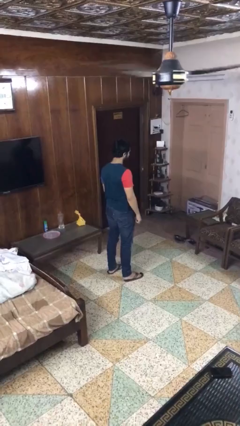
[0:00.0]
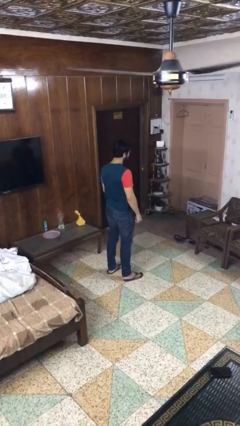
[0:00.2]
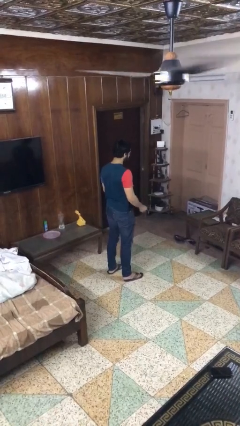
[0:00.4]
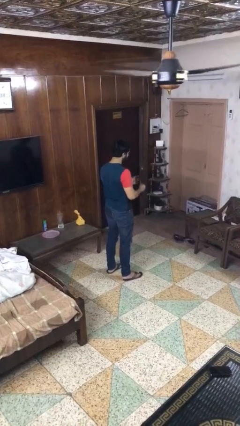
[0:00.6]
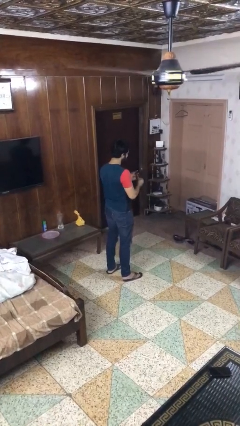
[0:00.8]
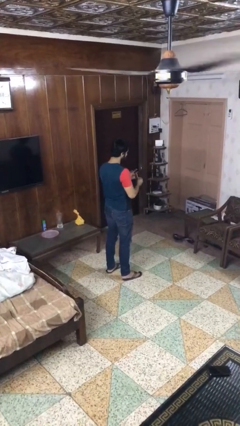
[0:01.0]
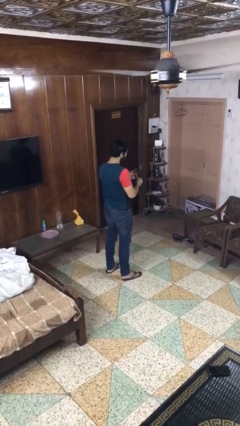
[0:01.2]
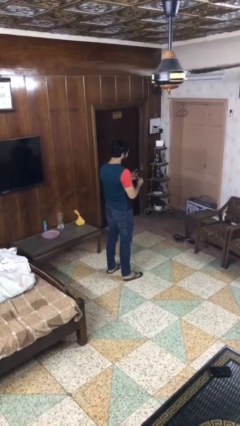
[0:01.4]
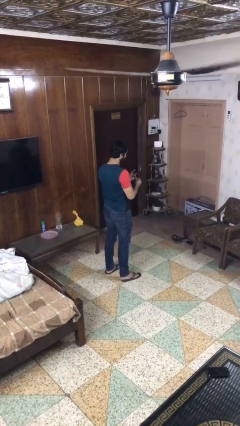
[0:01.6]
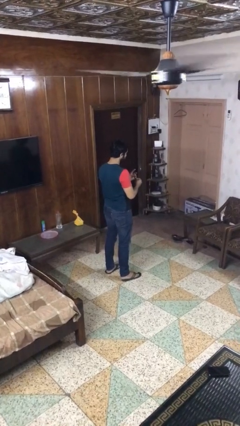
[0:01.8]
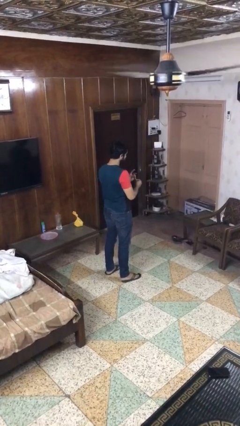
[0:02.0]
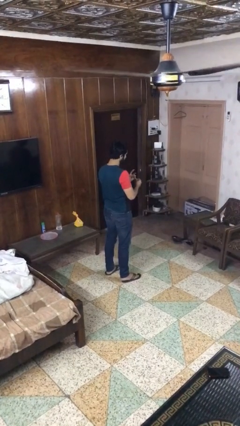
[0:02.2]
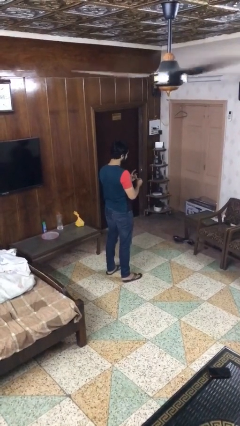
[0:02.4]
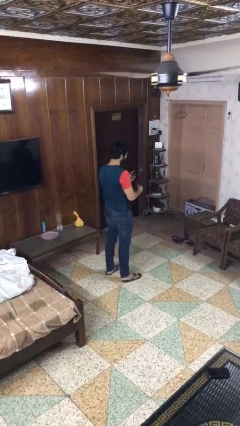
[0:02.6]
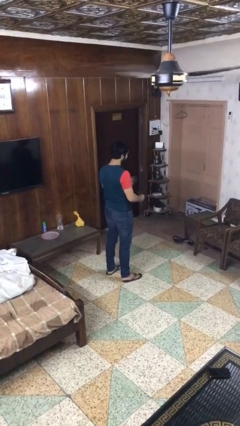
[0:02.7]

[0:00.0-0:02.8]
person files fingernails

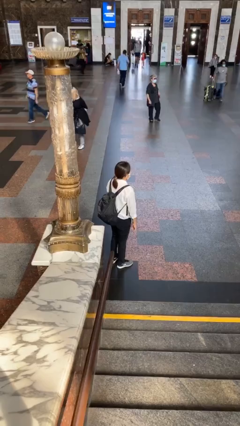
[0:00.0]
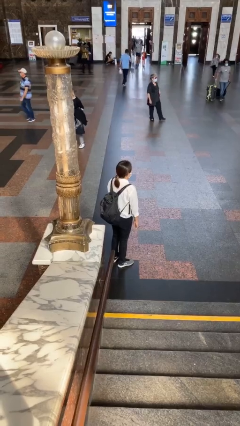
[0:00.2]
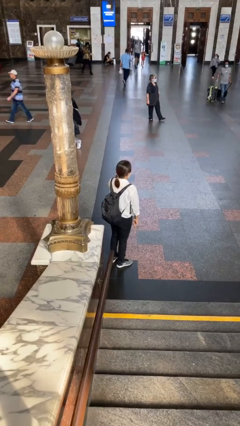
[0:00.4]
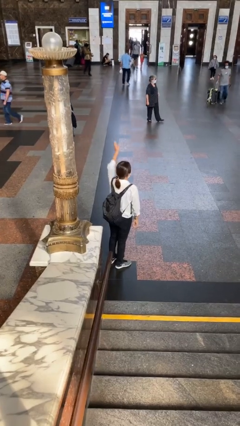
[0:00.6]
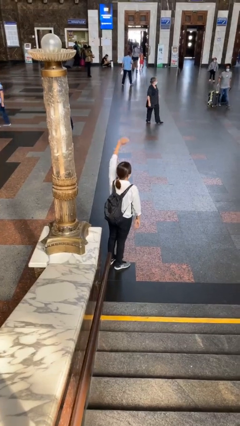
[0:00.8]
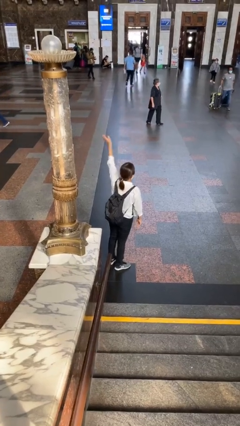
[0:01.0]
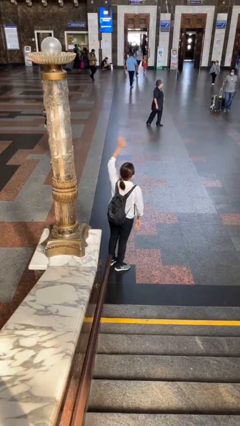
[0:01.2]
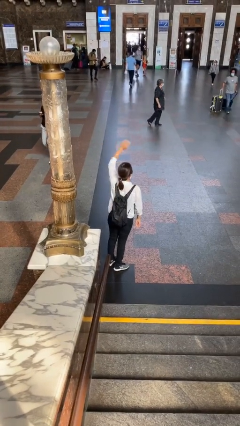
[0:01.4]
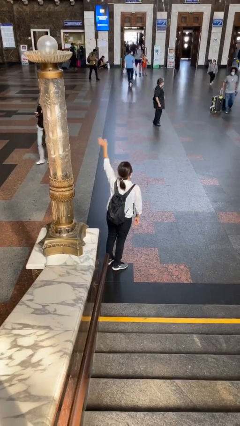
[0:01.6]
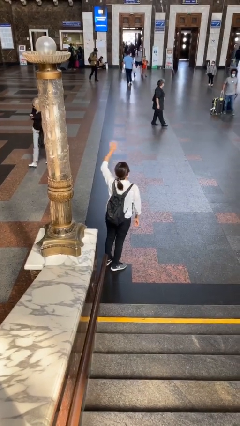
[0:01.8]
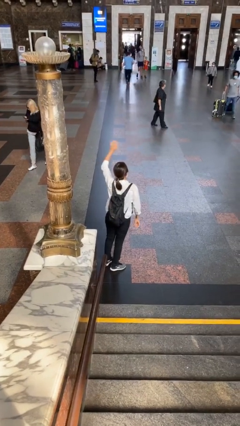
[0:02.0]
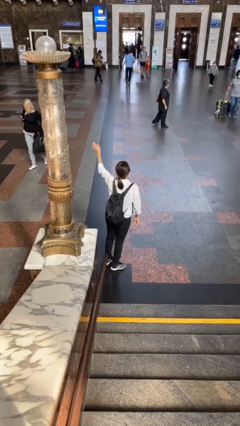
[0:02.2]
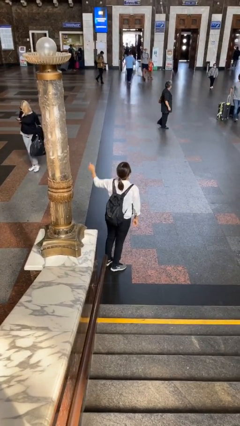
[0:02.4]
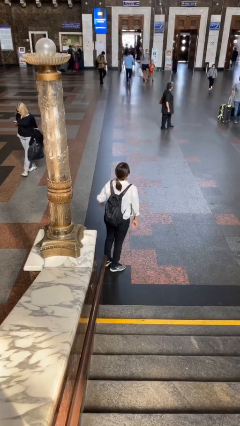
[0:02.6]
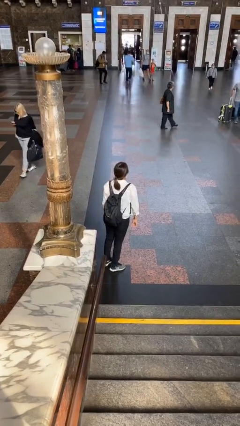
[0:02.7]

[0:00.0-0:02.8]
person waves at person

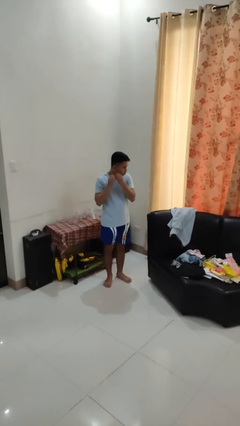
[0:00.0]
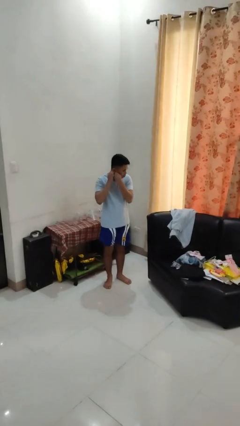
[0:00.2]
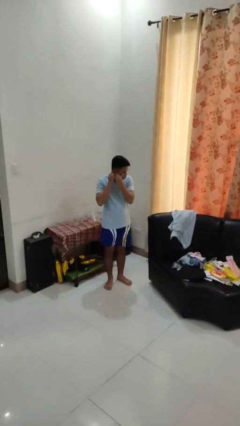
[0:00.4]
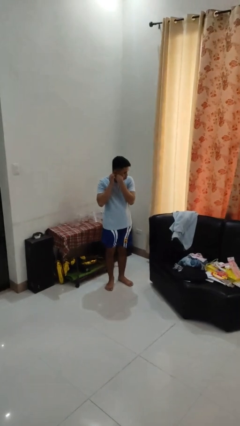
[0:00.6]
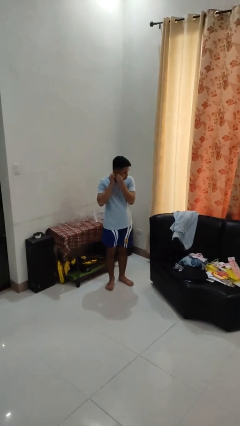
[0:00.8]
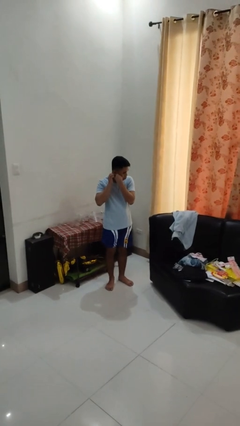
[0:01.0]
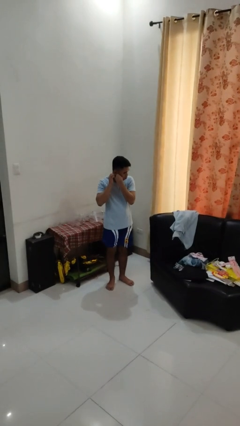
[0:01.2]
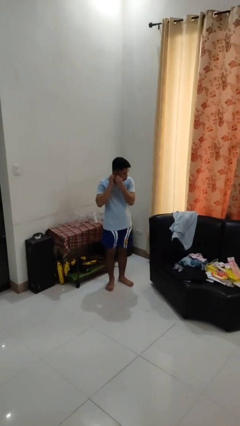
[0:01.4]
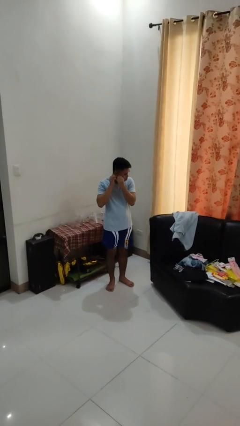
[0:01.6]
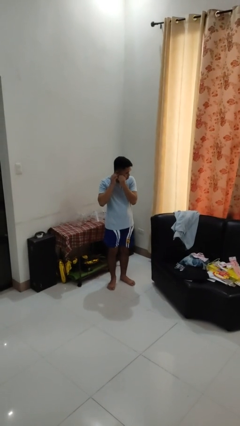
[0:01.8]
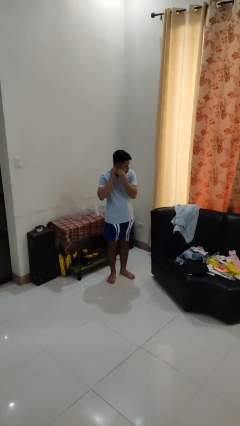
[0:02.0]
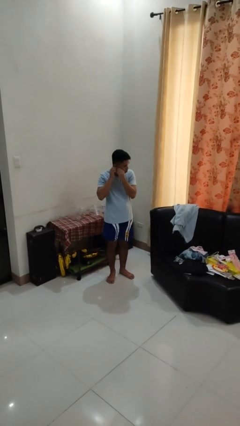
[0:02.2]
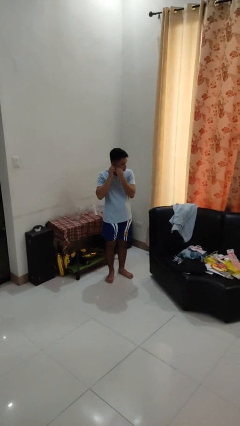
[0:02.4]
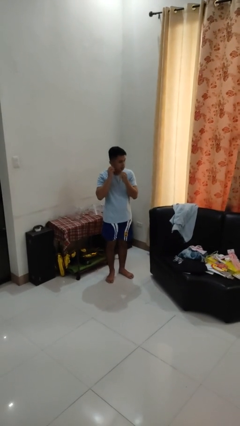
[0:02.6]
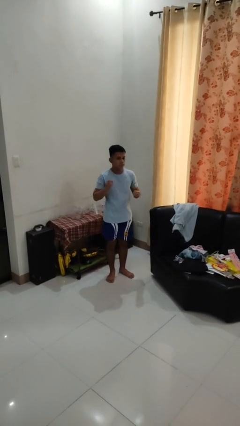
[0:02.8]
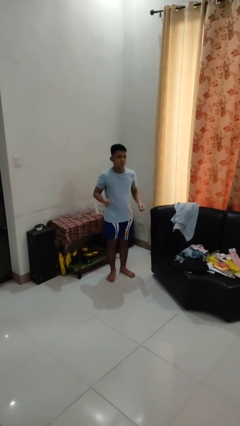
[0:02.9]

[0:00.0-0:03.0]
person takes off earrings

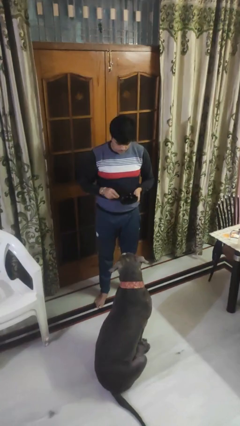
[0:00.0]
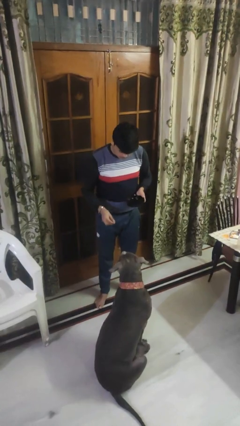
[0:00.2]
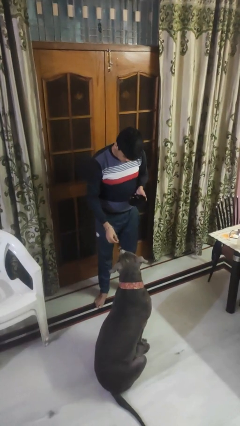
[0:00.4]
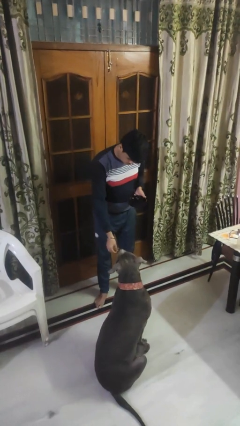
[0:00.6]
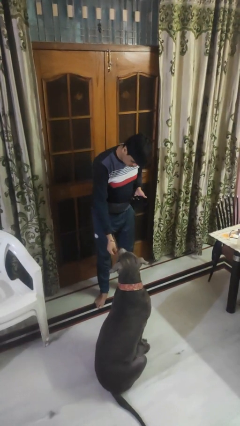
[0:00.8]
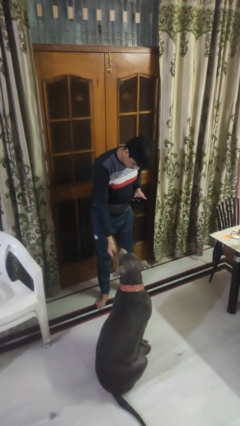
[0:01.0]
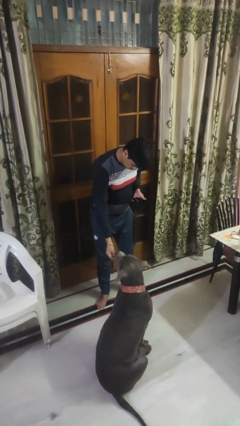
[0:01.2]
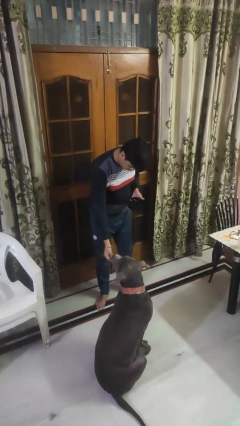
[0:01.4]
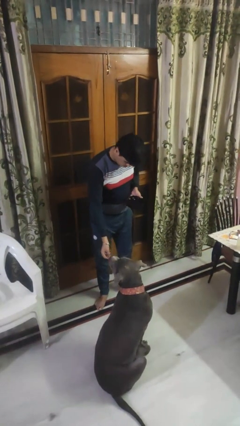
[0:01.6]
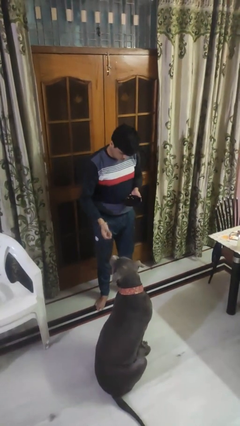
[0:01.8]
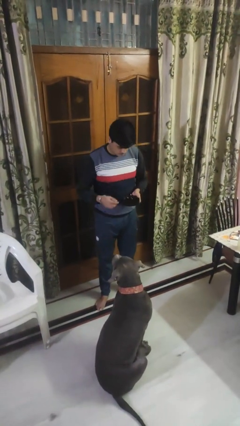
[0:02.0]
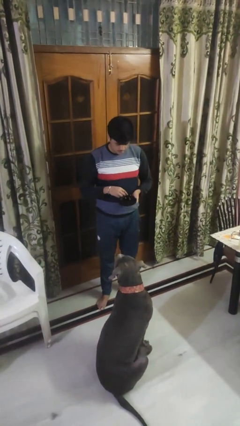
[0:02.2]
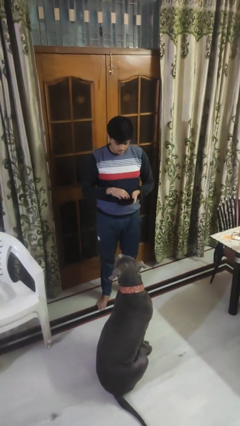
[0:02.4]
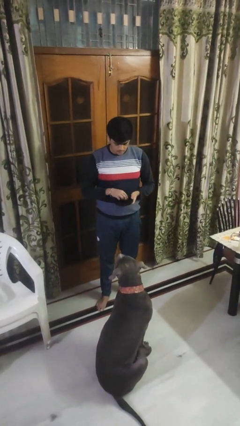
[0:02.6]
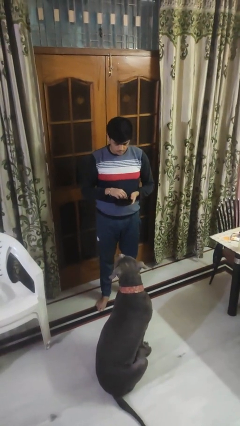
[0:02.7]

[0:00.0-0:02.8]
person feeds dog

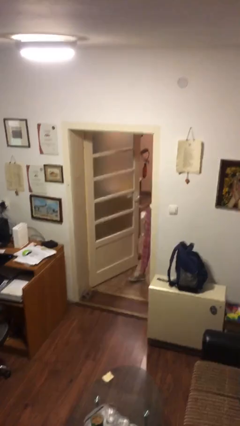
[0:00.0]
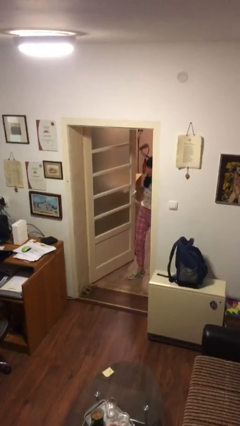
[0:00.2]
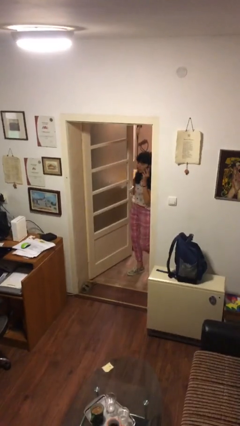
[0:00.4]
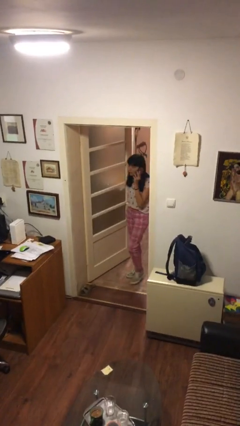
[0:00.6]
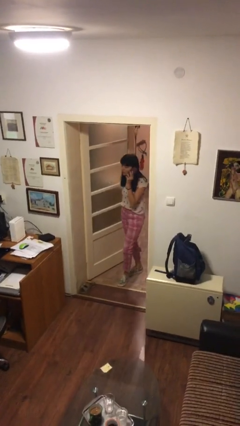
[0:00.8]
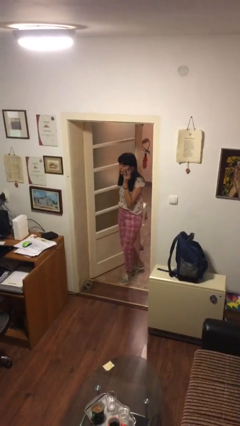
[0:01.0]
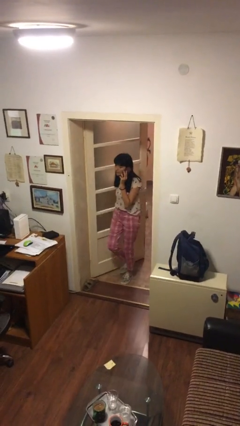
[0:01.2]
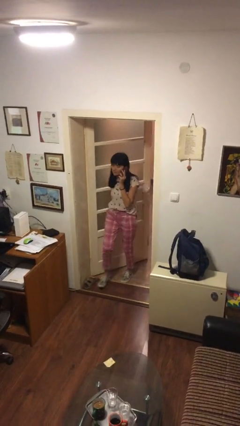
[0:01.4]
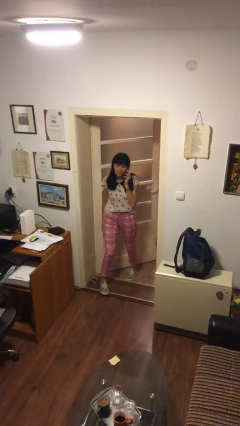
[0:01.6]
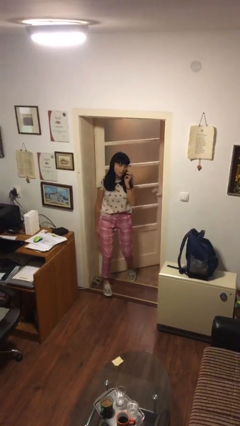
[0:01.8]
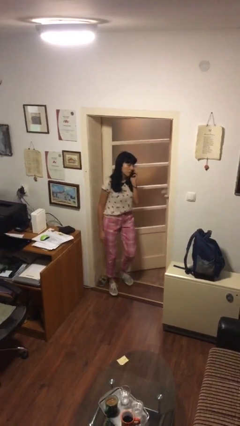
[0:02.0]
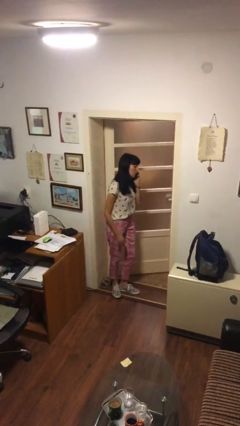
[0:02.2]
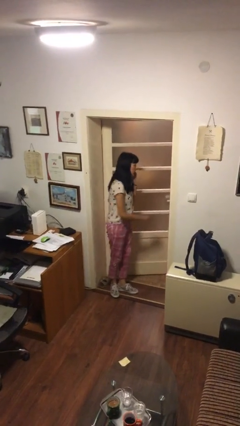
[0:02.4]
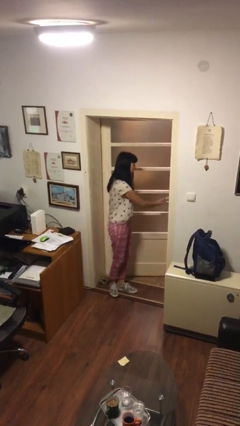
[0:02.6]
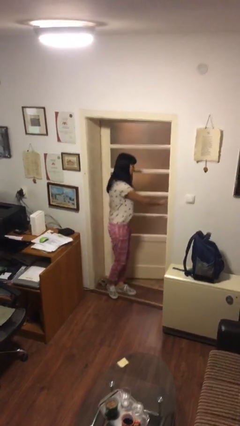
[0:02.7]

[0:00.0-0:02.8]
person enters scene through structure

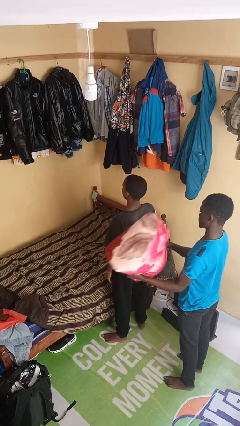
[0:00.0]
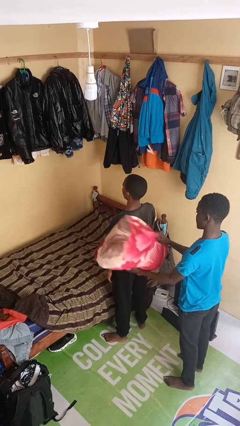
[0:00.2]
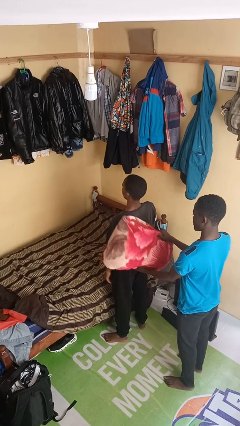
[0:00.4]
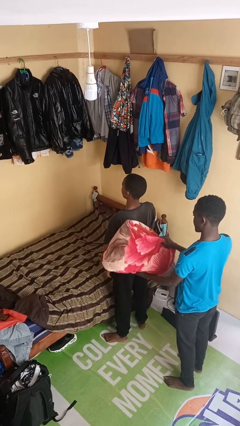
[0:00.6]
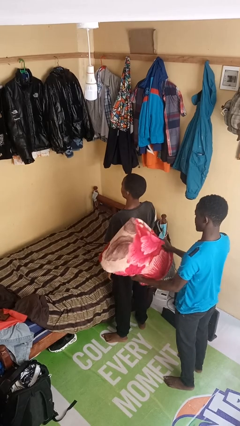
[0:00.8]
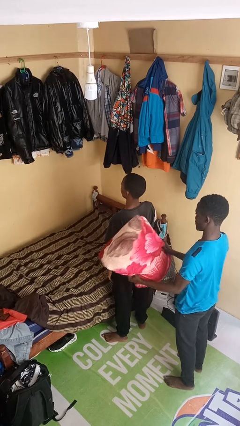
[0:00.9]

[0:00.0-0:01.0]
person hits person with pillow

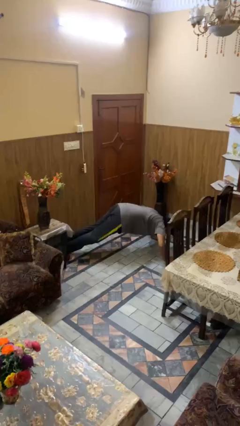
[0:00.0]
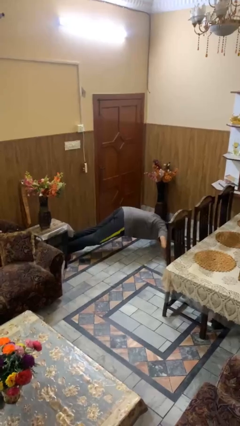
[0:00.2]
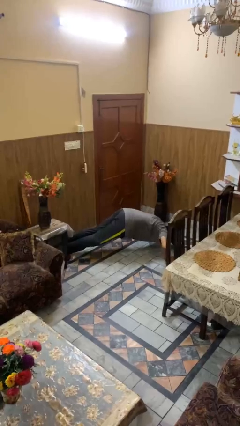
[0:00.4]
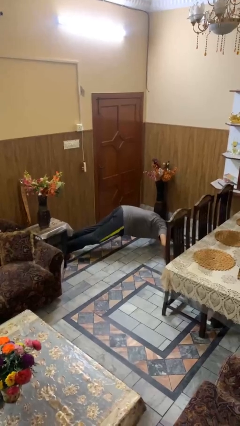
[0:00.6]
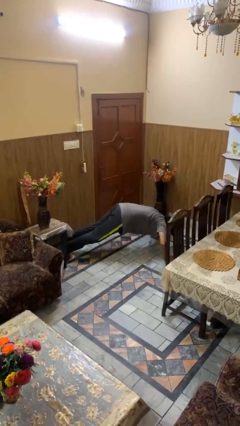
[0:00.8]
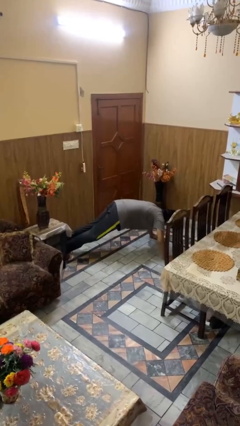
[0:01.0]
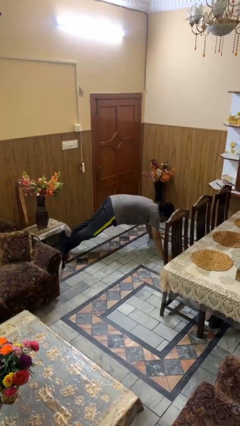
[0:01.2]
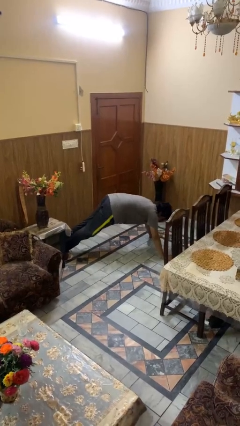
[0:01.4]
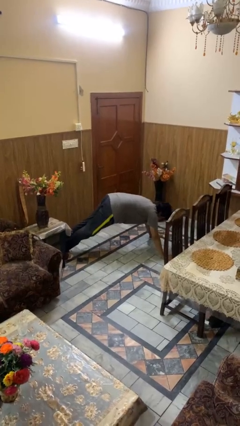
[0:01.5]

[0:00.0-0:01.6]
person exercises with pushup
